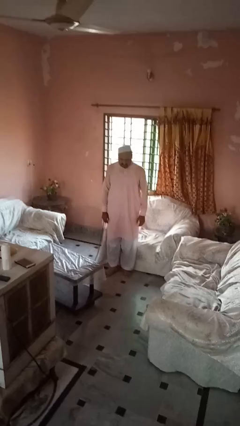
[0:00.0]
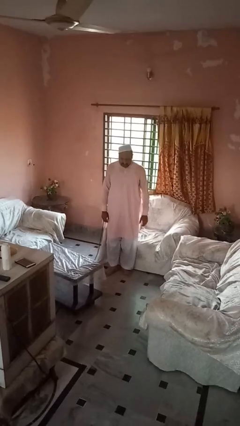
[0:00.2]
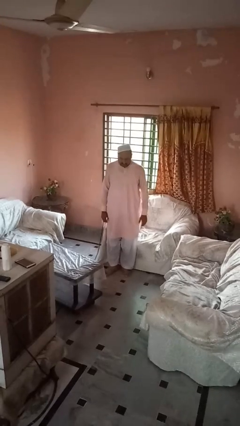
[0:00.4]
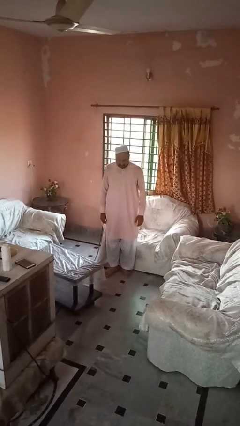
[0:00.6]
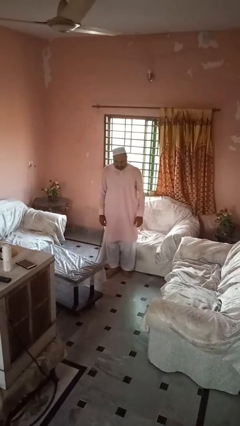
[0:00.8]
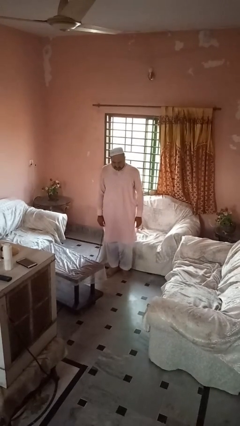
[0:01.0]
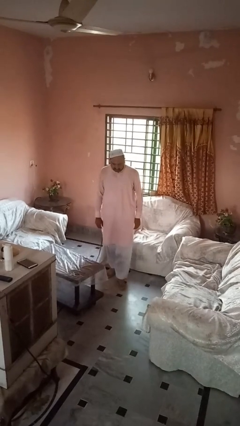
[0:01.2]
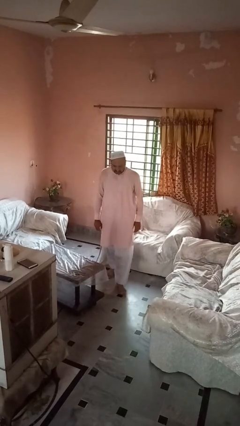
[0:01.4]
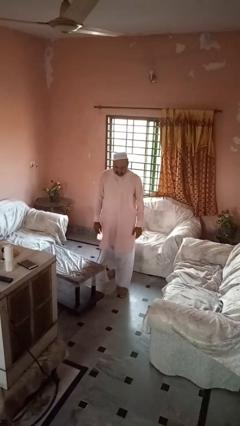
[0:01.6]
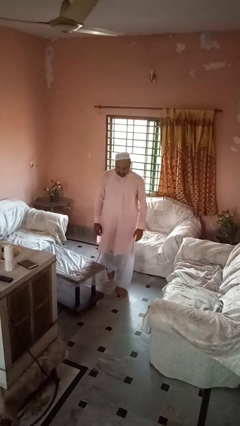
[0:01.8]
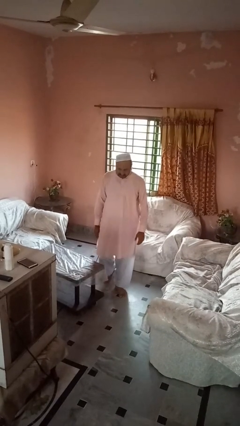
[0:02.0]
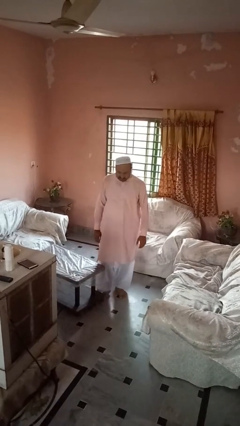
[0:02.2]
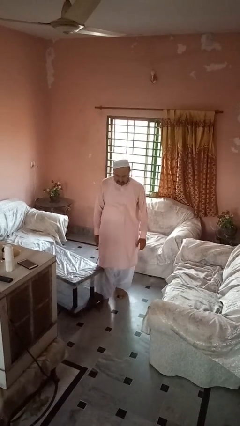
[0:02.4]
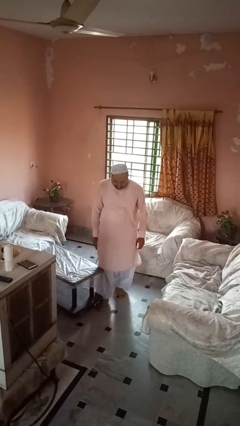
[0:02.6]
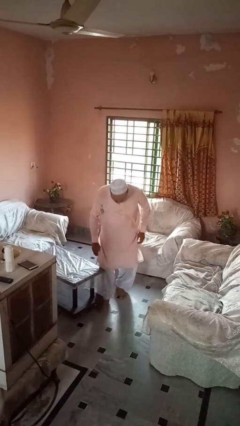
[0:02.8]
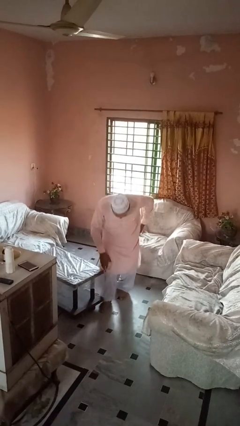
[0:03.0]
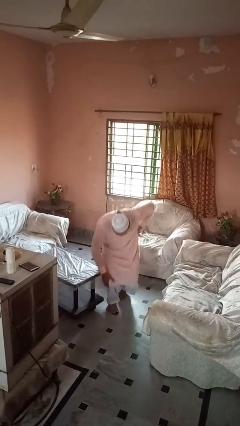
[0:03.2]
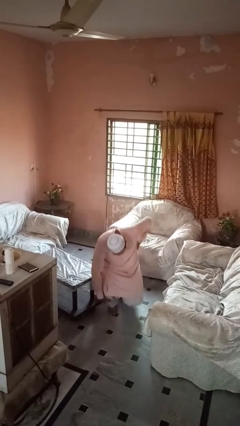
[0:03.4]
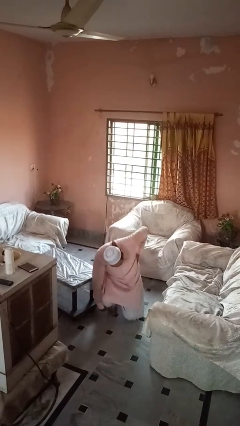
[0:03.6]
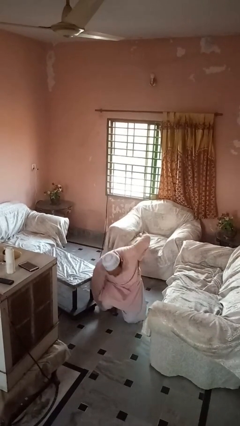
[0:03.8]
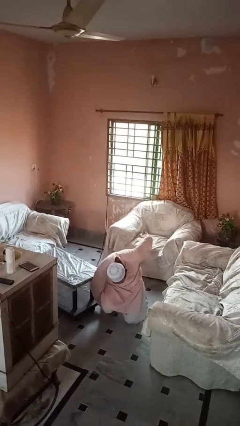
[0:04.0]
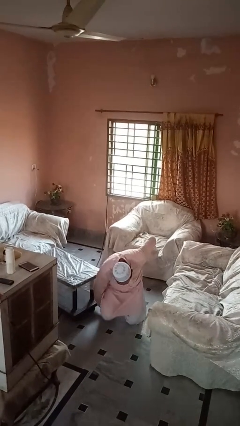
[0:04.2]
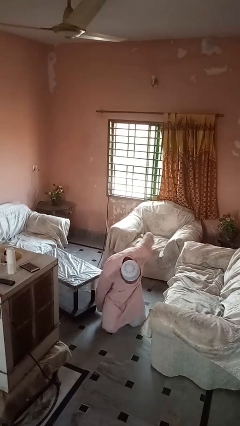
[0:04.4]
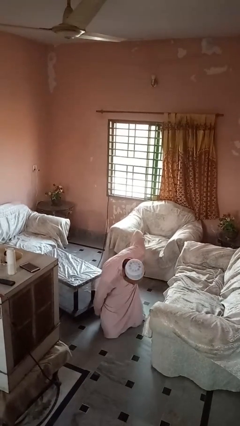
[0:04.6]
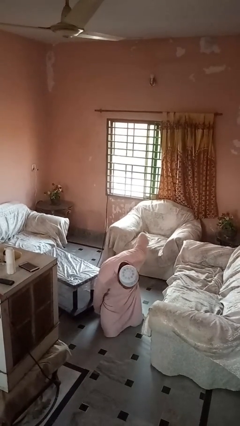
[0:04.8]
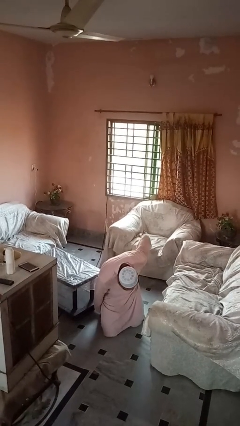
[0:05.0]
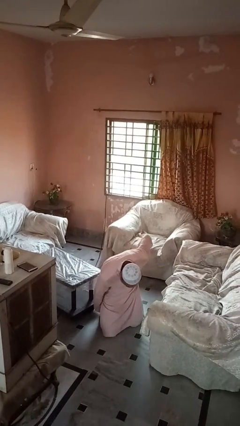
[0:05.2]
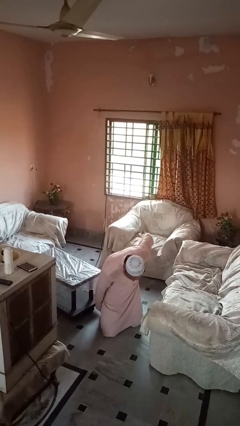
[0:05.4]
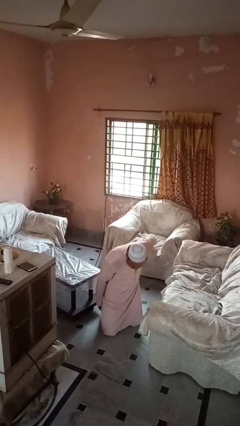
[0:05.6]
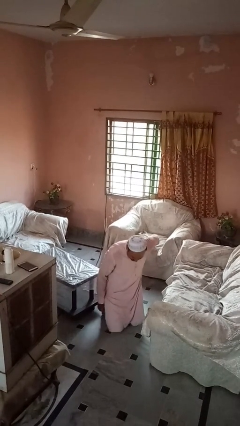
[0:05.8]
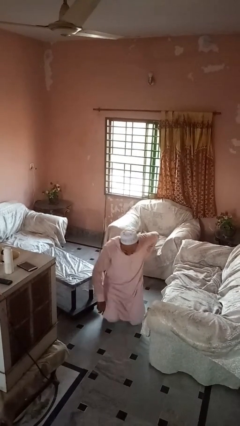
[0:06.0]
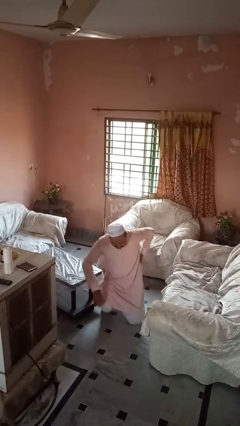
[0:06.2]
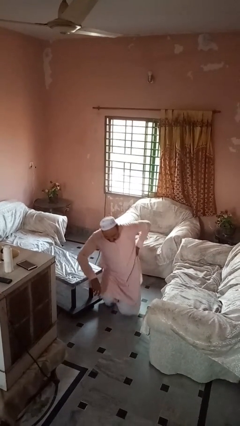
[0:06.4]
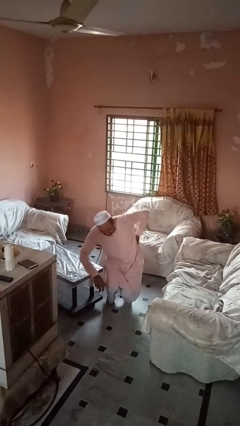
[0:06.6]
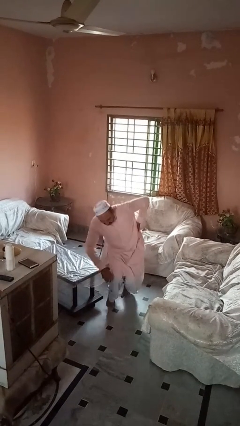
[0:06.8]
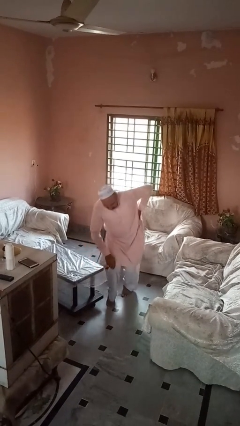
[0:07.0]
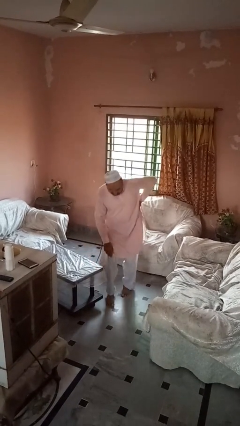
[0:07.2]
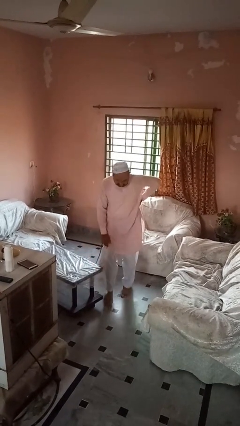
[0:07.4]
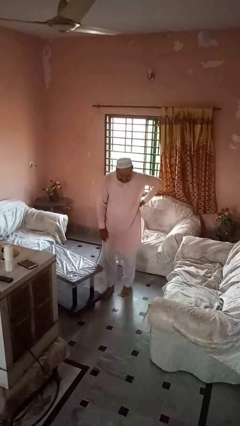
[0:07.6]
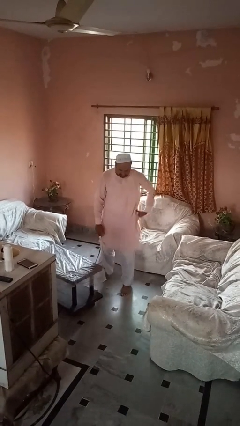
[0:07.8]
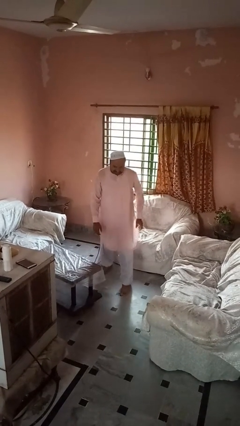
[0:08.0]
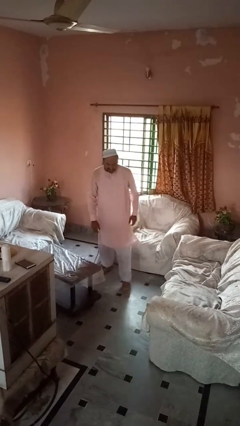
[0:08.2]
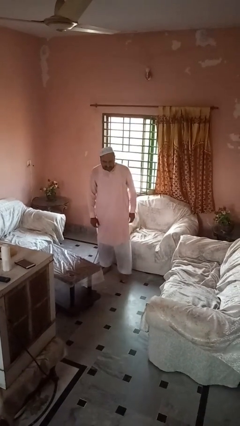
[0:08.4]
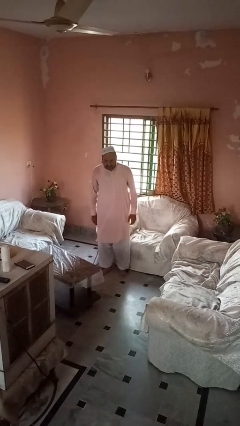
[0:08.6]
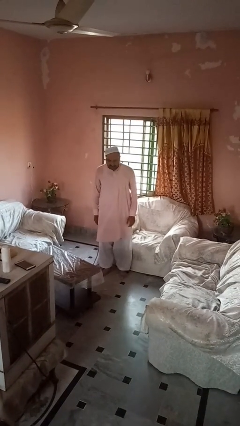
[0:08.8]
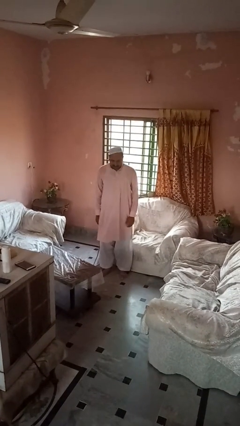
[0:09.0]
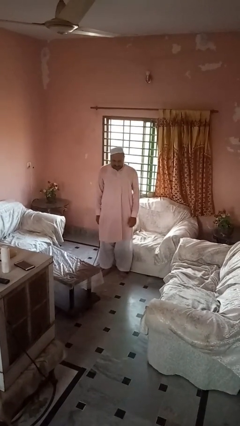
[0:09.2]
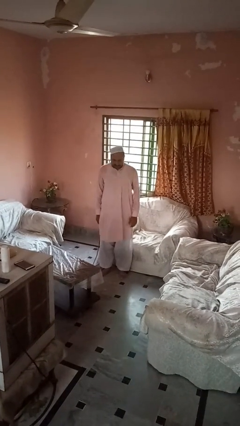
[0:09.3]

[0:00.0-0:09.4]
person bumps into table

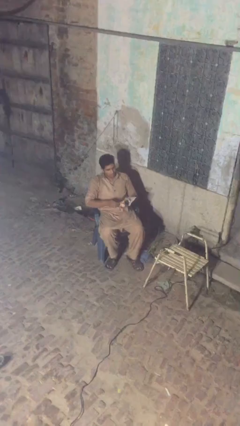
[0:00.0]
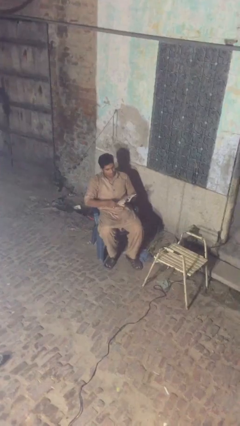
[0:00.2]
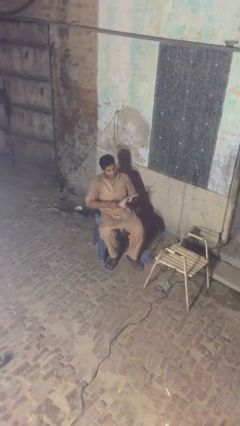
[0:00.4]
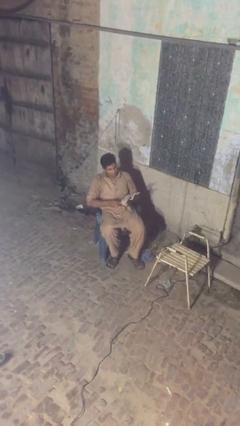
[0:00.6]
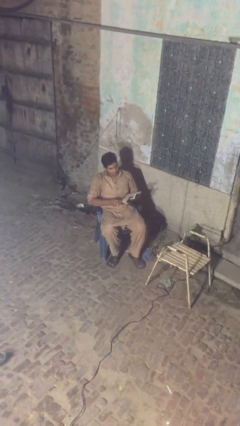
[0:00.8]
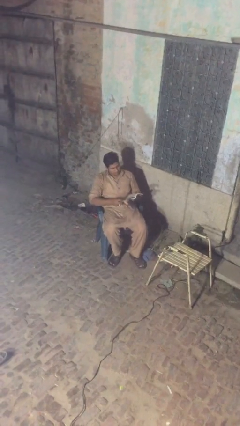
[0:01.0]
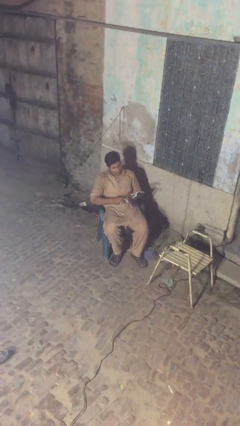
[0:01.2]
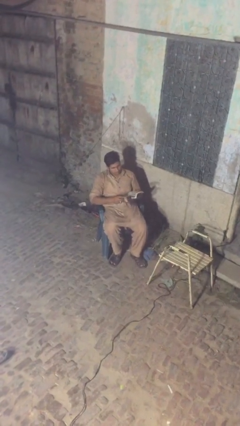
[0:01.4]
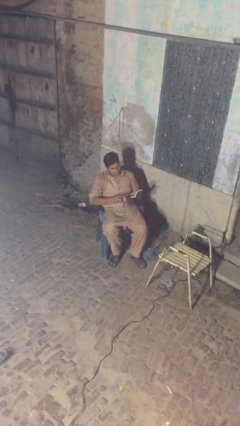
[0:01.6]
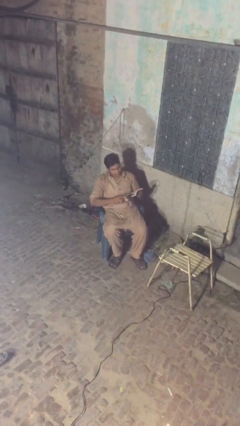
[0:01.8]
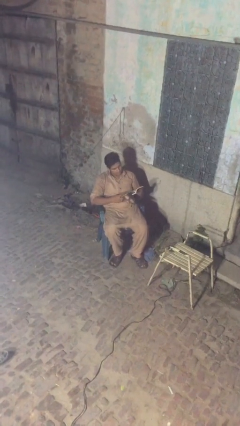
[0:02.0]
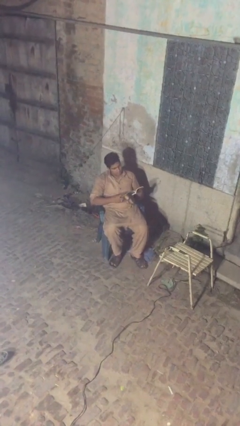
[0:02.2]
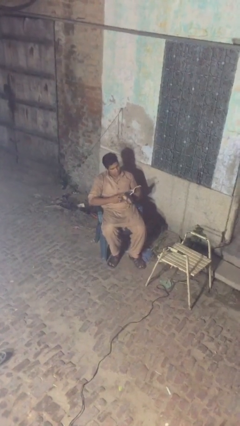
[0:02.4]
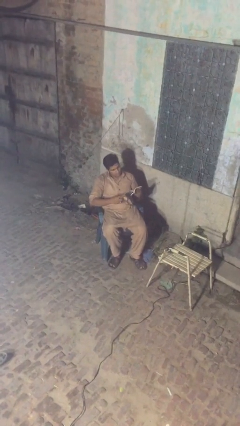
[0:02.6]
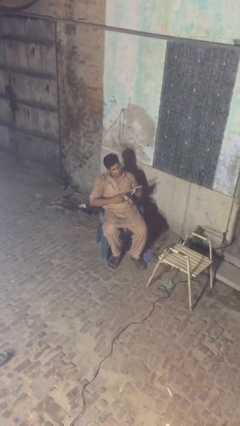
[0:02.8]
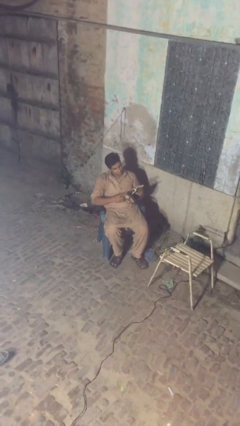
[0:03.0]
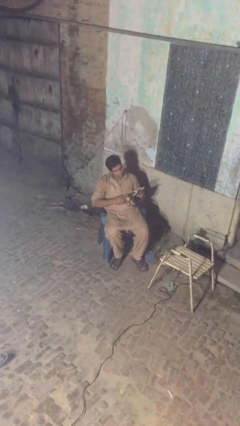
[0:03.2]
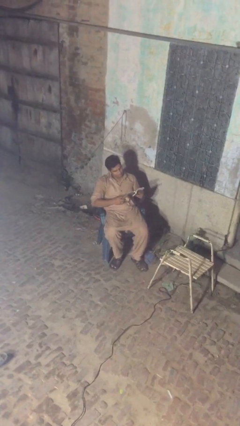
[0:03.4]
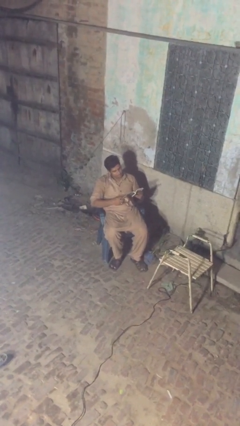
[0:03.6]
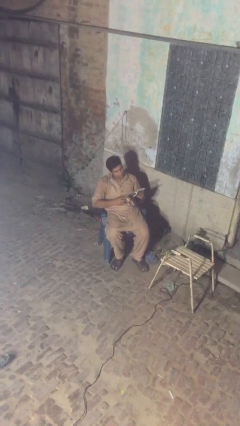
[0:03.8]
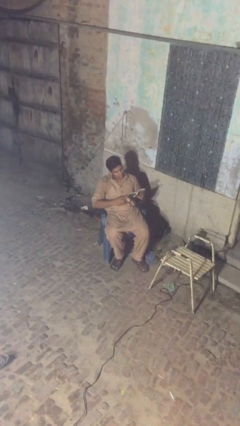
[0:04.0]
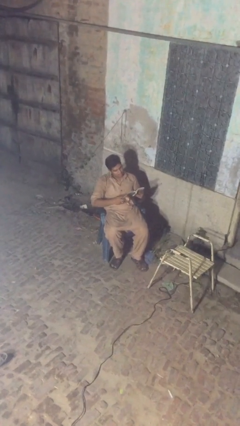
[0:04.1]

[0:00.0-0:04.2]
person reads document

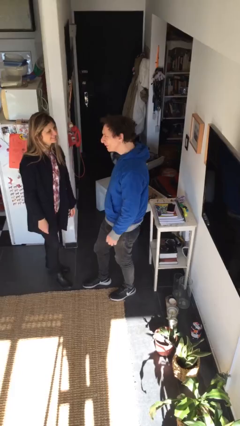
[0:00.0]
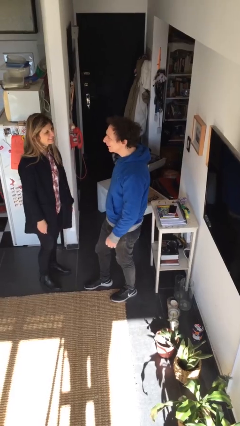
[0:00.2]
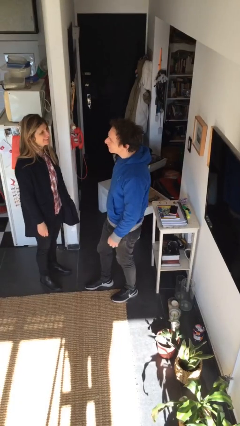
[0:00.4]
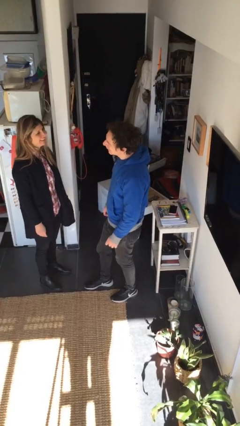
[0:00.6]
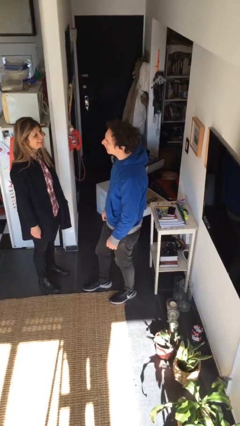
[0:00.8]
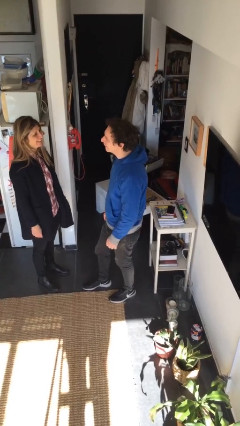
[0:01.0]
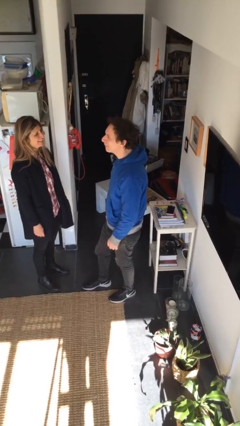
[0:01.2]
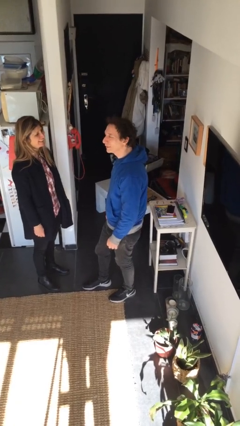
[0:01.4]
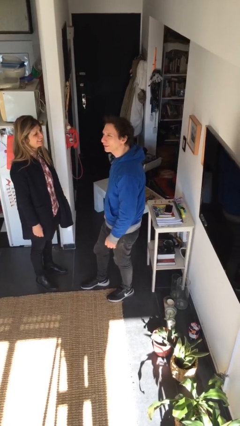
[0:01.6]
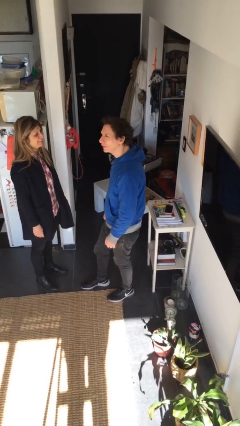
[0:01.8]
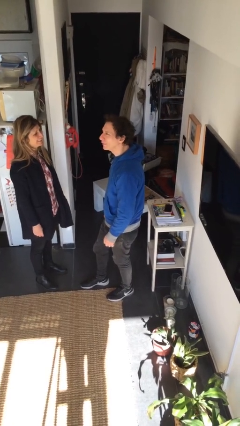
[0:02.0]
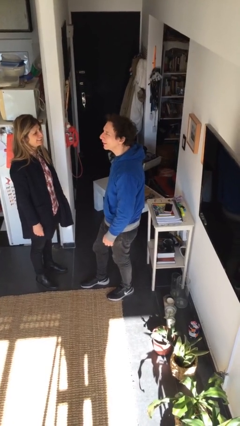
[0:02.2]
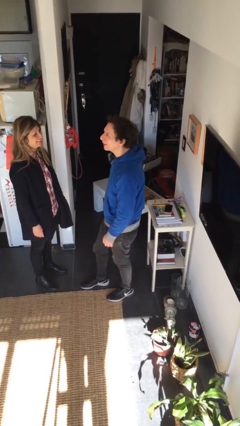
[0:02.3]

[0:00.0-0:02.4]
person talks to person

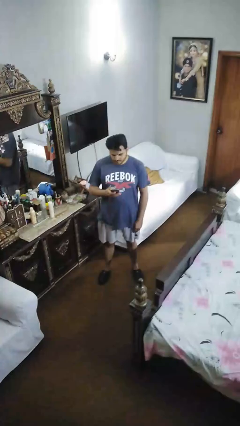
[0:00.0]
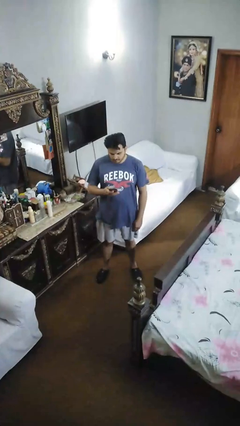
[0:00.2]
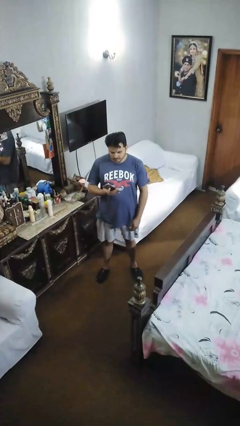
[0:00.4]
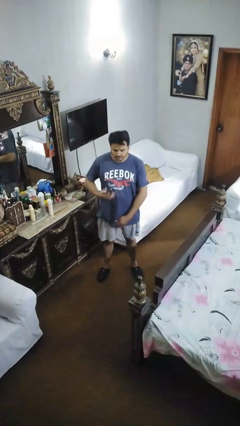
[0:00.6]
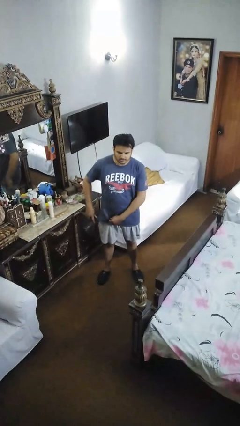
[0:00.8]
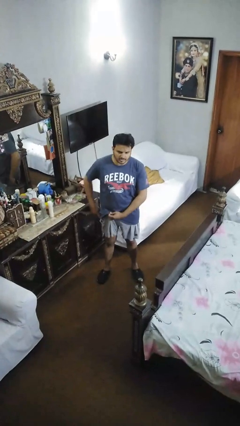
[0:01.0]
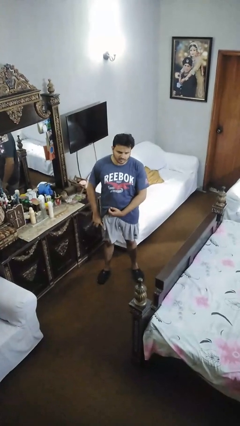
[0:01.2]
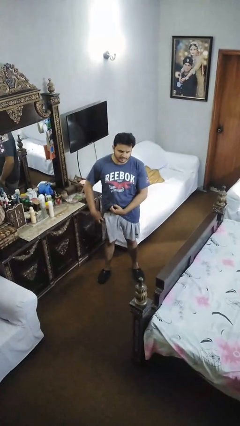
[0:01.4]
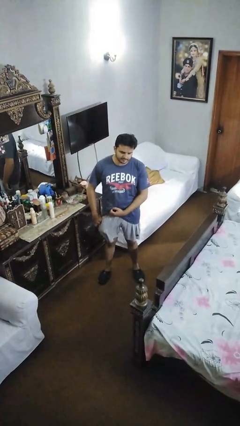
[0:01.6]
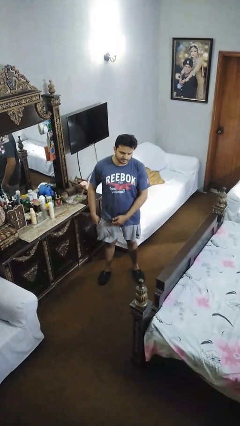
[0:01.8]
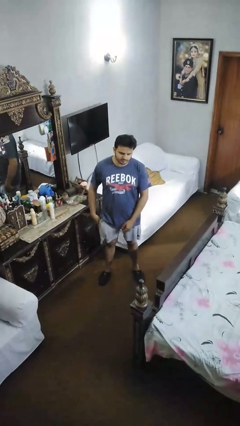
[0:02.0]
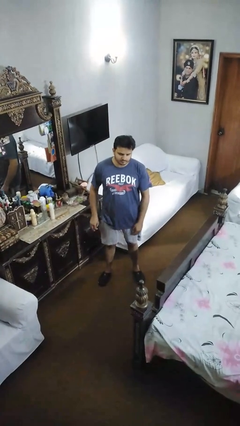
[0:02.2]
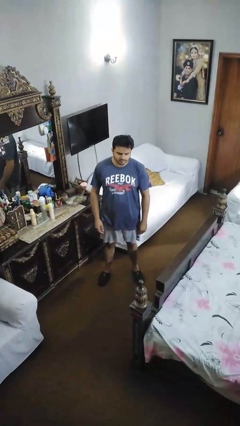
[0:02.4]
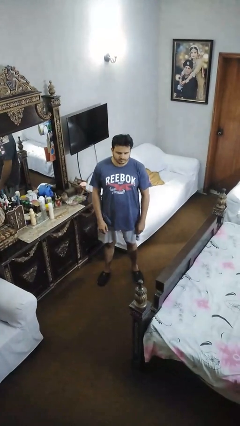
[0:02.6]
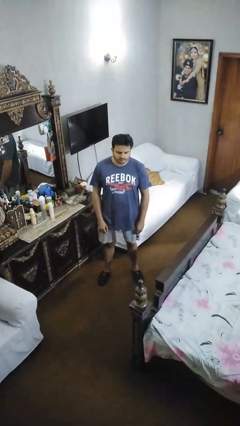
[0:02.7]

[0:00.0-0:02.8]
person puts phone into pocket
